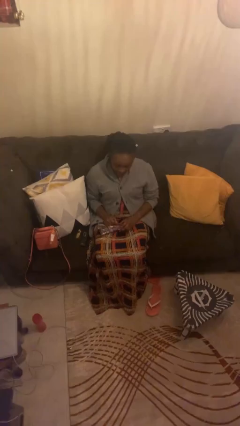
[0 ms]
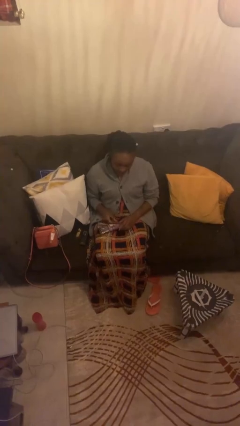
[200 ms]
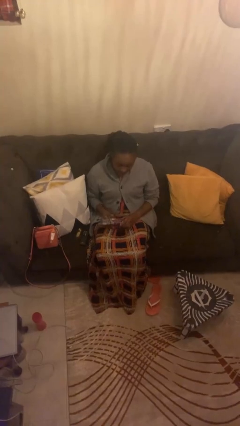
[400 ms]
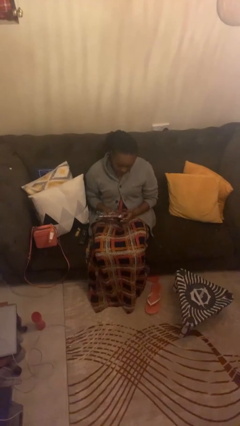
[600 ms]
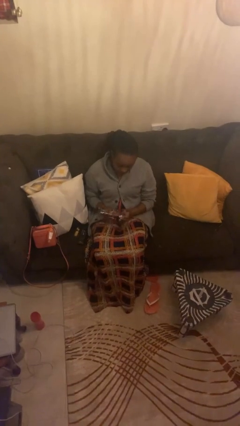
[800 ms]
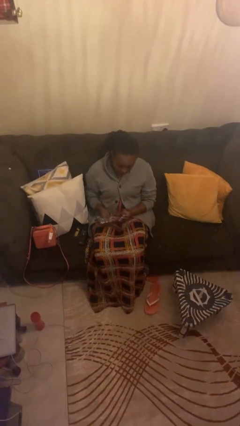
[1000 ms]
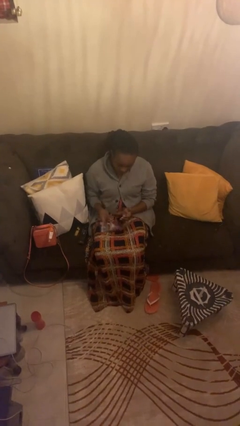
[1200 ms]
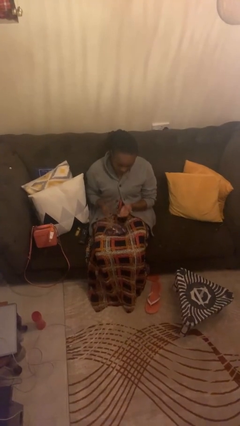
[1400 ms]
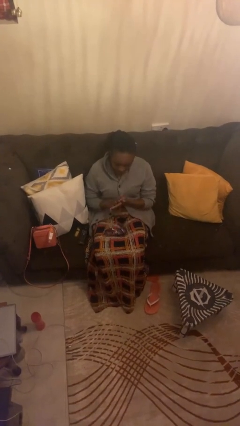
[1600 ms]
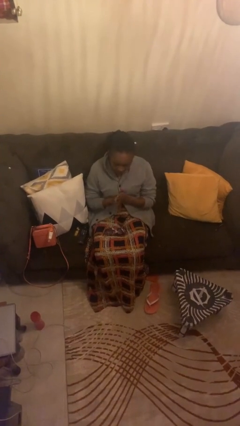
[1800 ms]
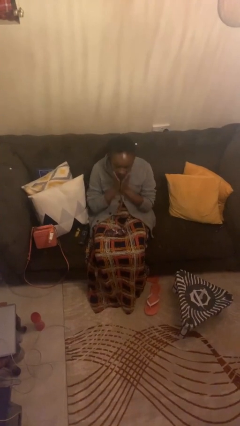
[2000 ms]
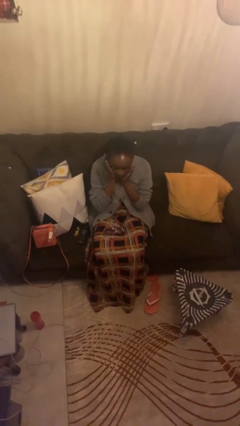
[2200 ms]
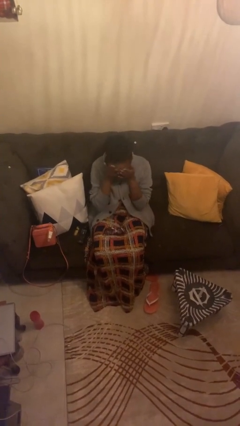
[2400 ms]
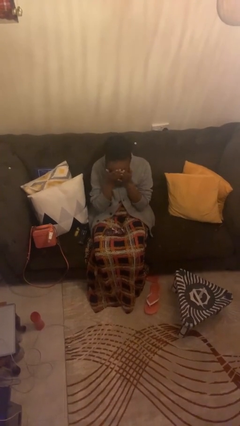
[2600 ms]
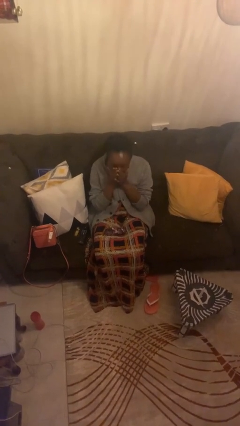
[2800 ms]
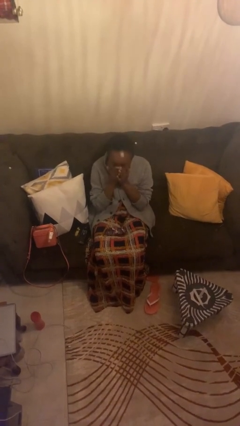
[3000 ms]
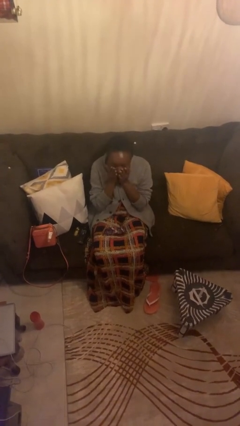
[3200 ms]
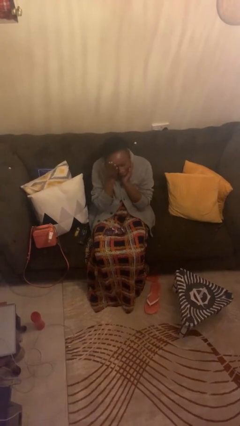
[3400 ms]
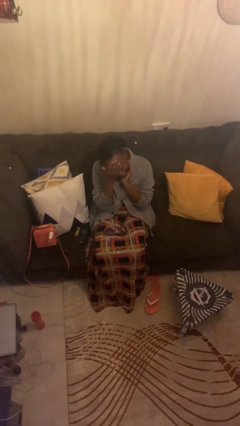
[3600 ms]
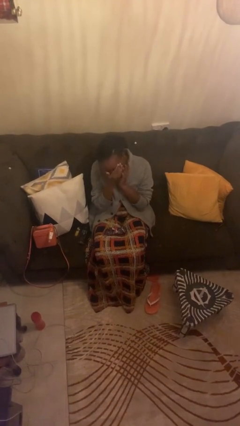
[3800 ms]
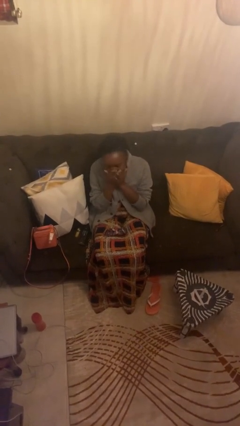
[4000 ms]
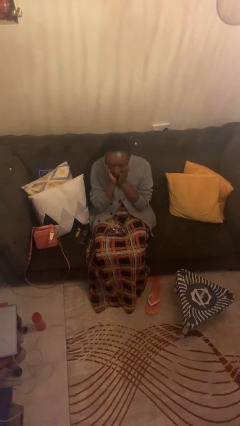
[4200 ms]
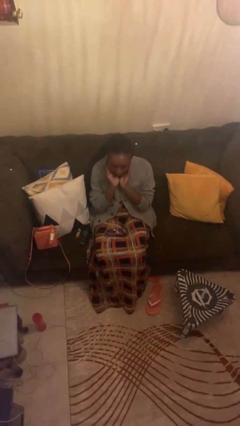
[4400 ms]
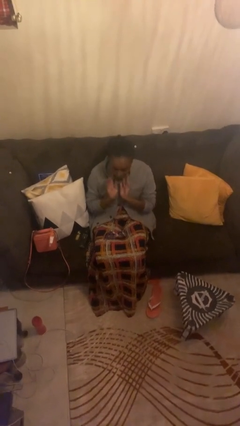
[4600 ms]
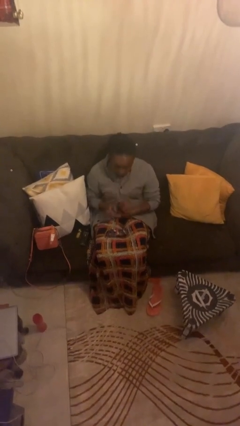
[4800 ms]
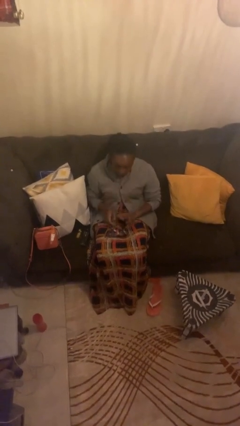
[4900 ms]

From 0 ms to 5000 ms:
person applies facial moisturizer

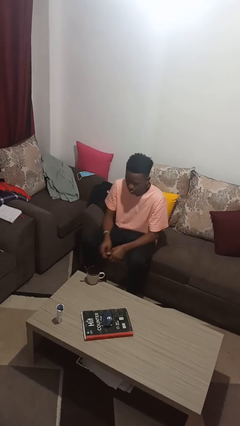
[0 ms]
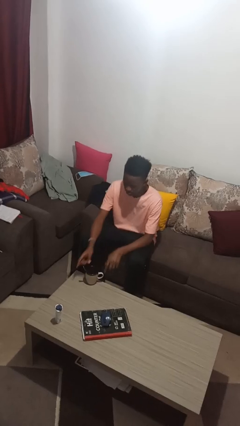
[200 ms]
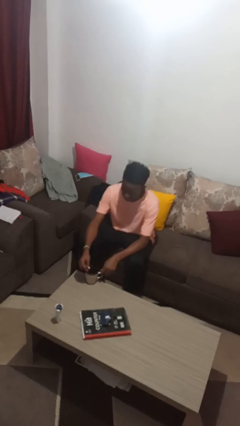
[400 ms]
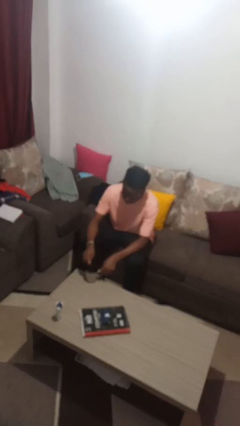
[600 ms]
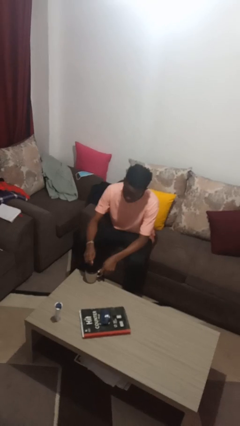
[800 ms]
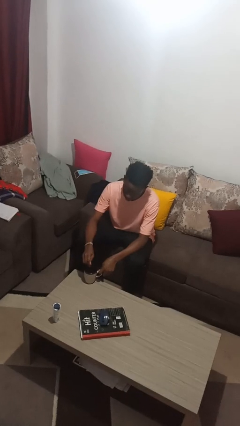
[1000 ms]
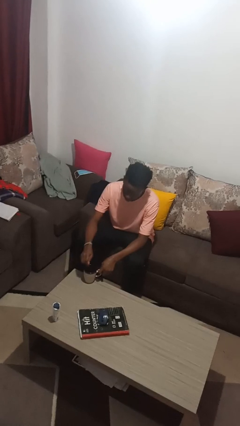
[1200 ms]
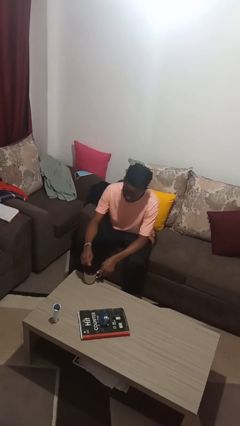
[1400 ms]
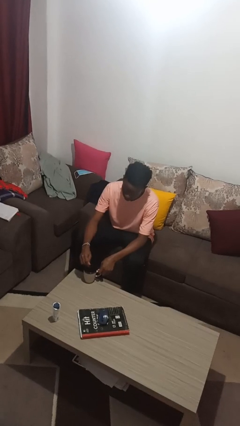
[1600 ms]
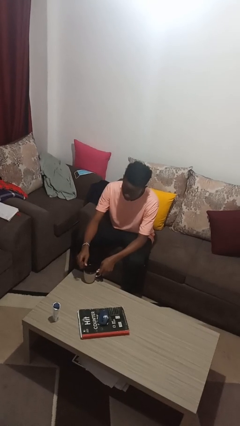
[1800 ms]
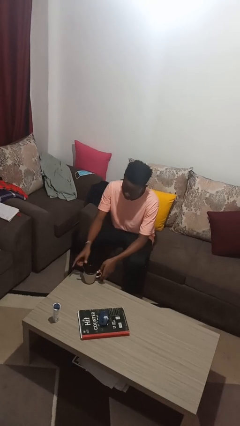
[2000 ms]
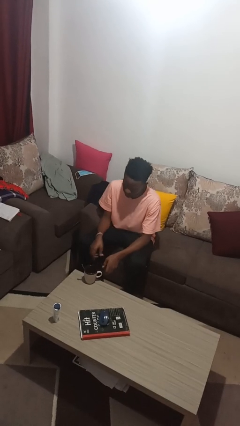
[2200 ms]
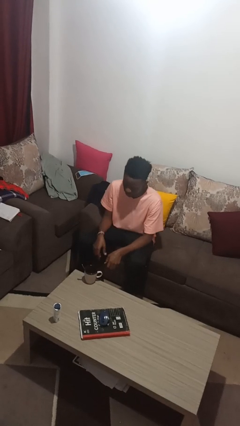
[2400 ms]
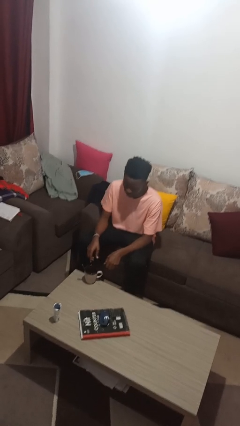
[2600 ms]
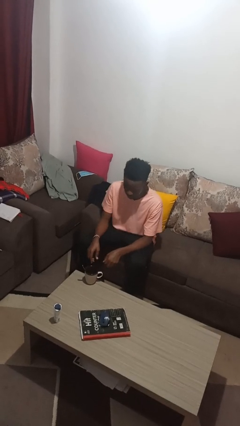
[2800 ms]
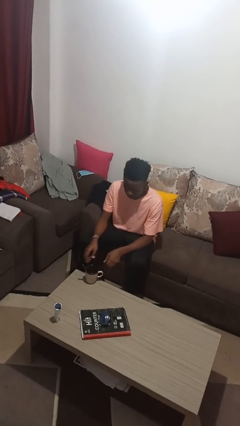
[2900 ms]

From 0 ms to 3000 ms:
person stirs mug

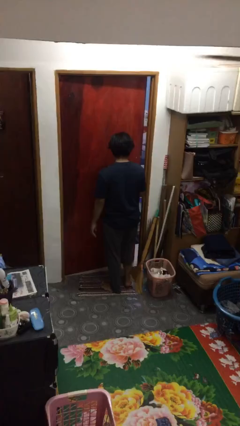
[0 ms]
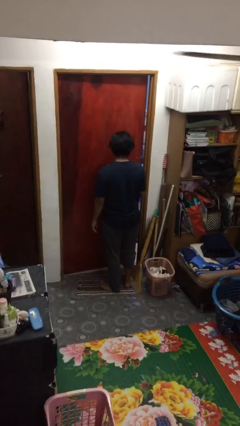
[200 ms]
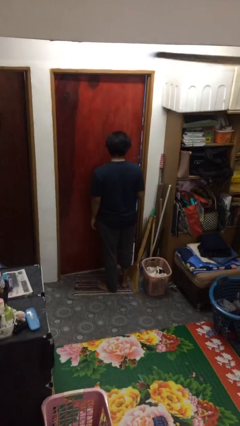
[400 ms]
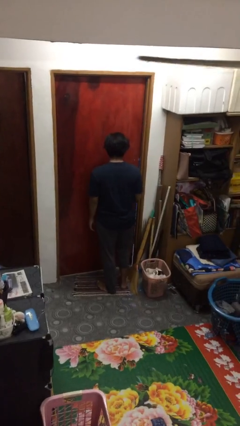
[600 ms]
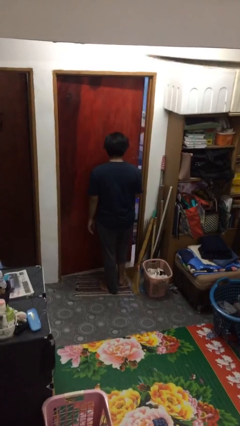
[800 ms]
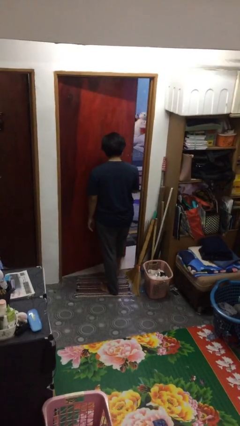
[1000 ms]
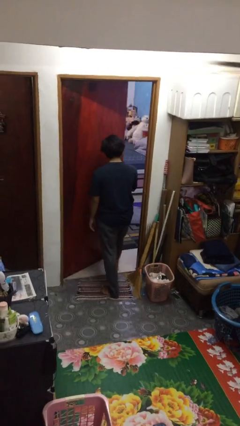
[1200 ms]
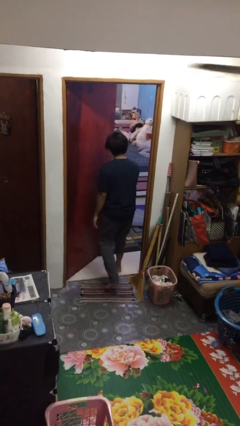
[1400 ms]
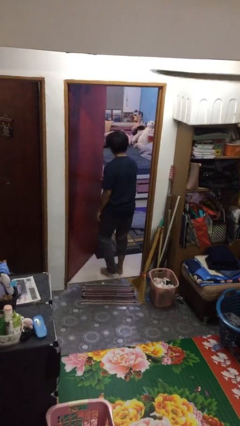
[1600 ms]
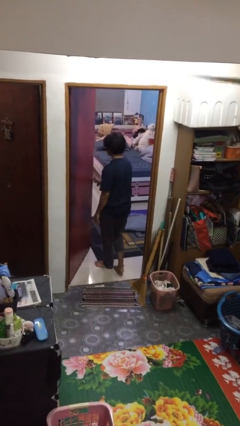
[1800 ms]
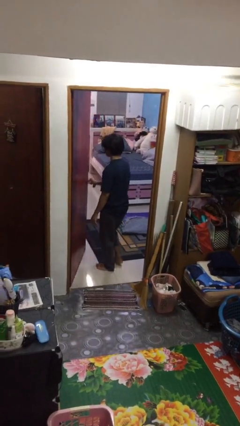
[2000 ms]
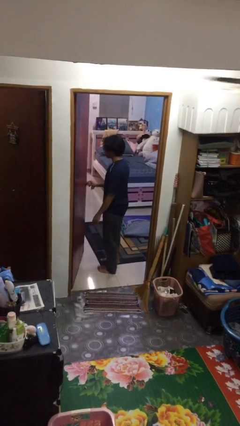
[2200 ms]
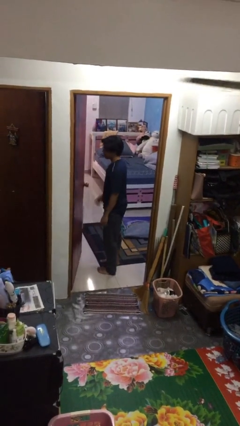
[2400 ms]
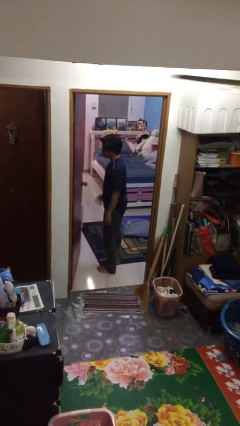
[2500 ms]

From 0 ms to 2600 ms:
person opens facility door

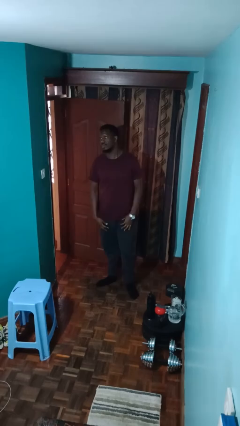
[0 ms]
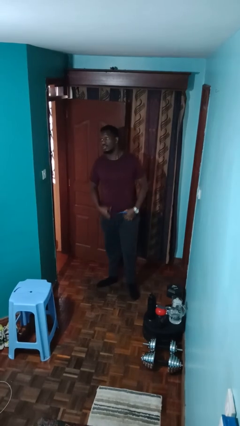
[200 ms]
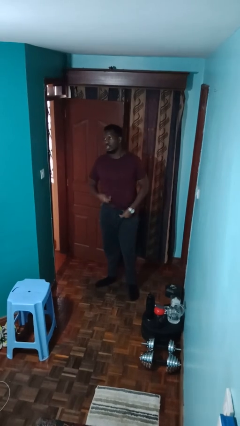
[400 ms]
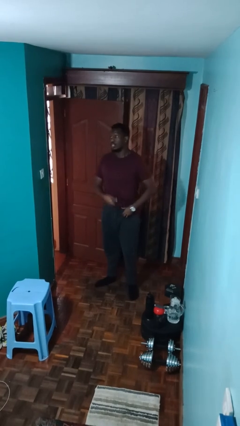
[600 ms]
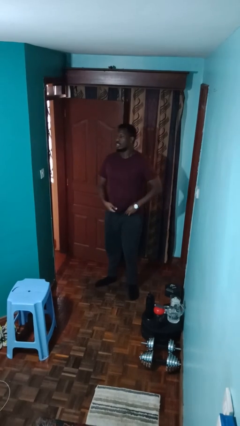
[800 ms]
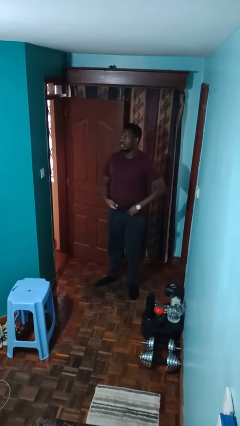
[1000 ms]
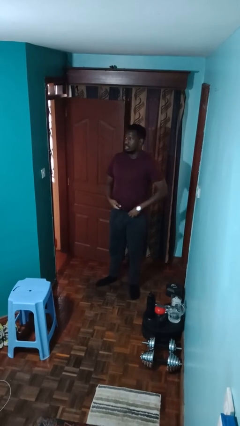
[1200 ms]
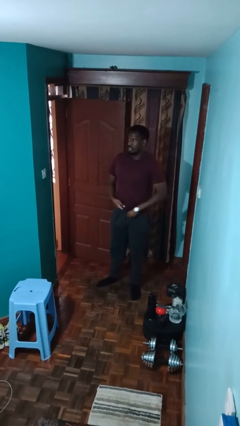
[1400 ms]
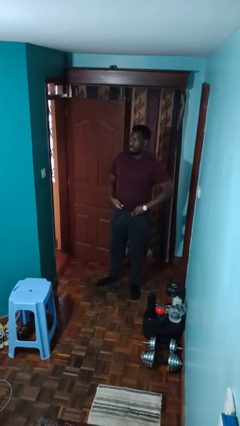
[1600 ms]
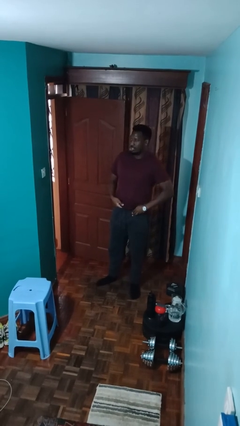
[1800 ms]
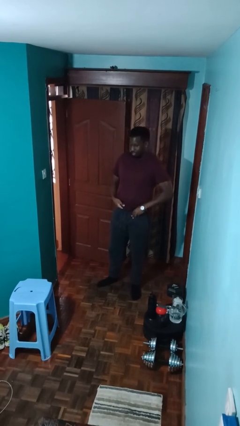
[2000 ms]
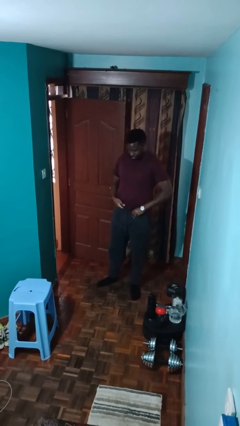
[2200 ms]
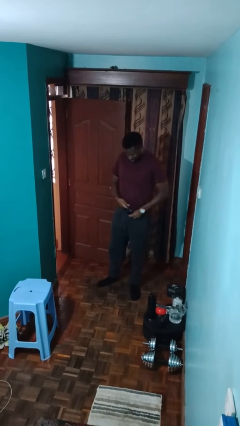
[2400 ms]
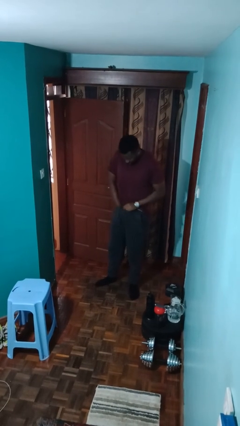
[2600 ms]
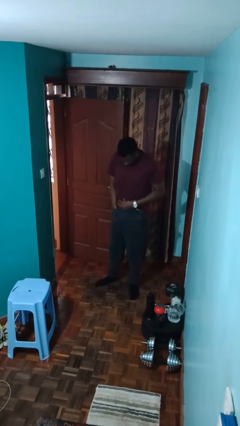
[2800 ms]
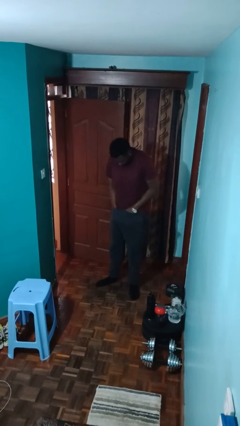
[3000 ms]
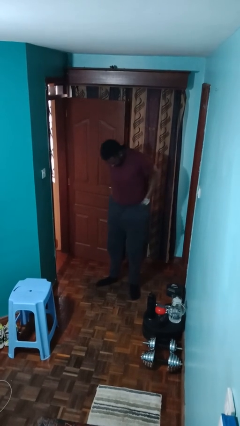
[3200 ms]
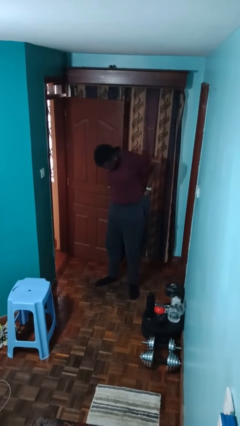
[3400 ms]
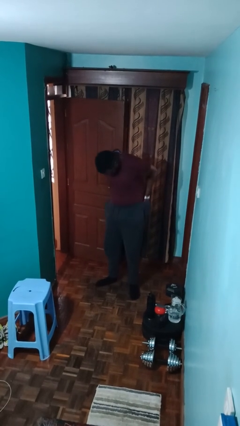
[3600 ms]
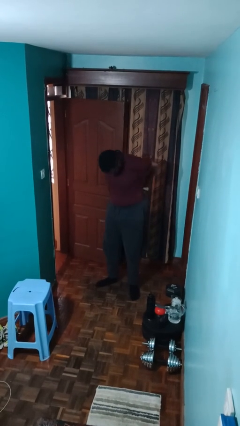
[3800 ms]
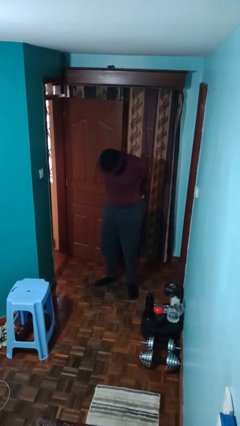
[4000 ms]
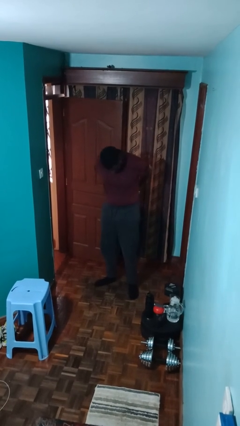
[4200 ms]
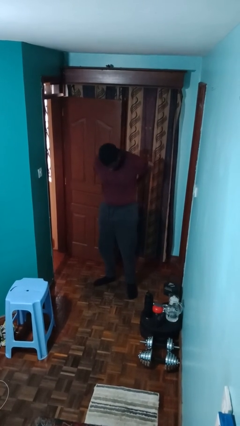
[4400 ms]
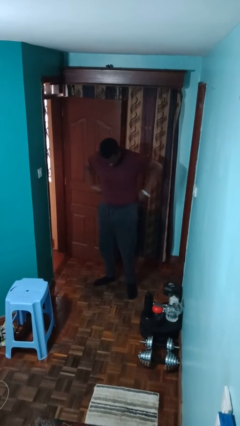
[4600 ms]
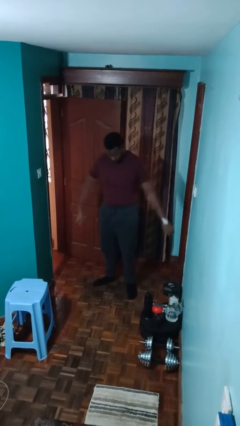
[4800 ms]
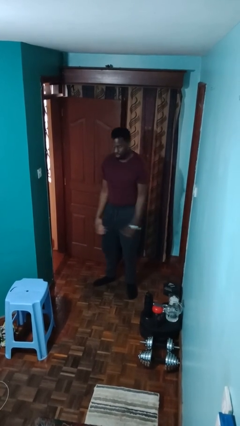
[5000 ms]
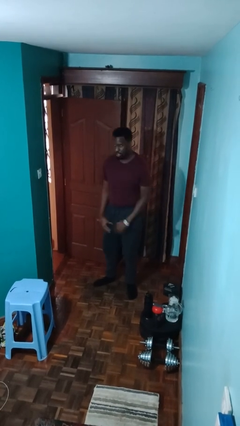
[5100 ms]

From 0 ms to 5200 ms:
person tucks in shirt

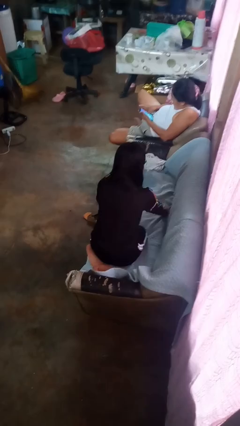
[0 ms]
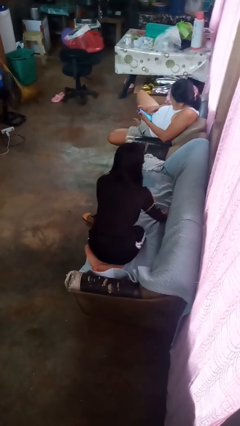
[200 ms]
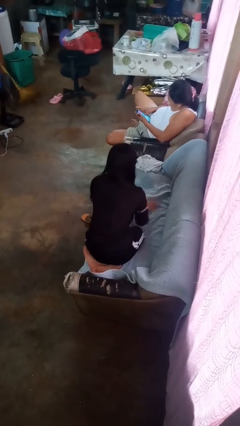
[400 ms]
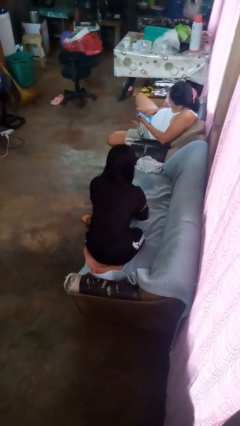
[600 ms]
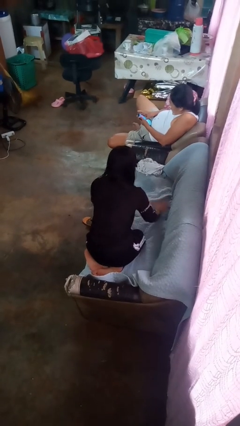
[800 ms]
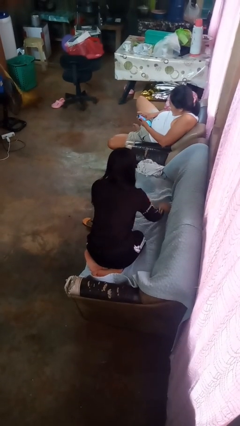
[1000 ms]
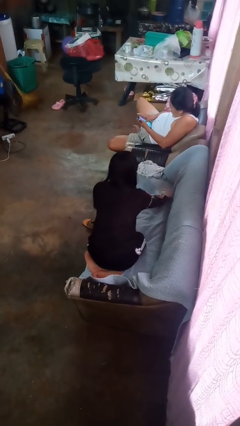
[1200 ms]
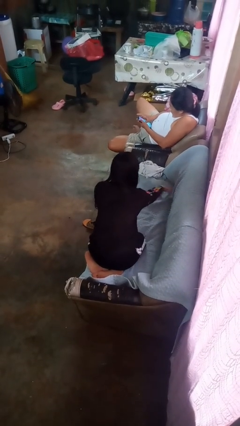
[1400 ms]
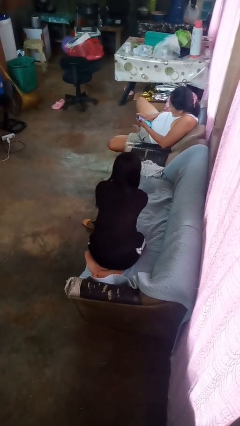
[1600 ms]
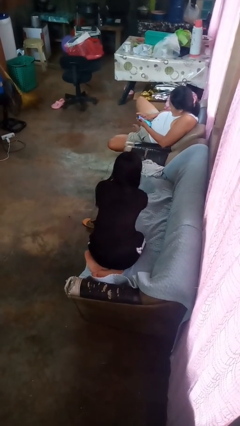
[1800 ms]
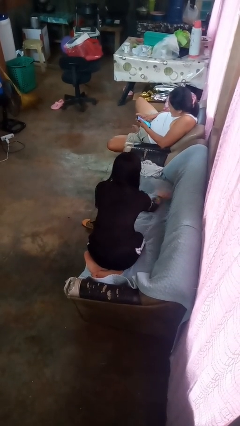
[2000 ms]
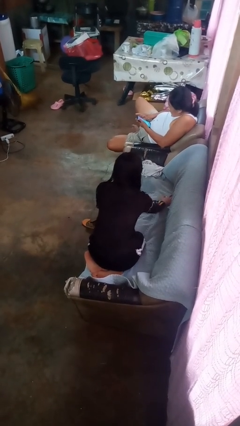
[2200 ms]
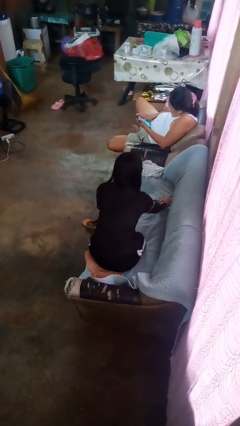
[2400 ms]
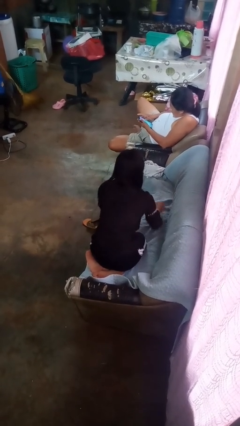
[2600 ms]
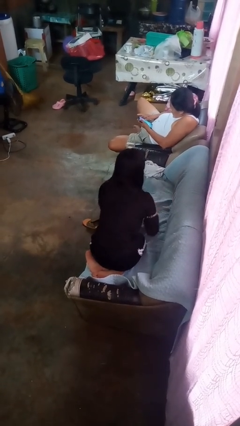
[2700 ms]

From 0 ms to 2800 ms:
person searches in couch
